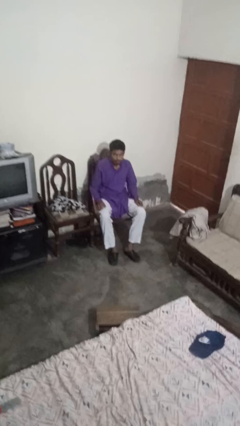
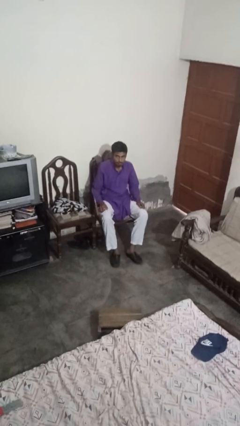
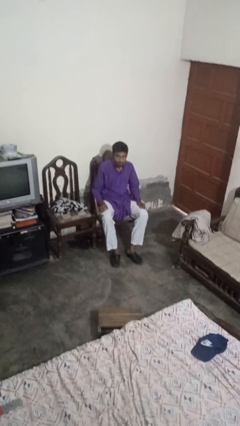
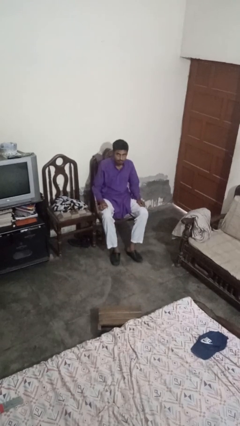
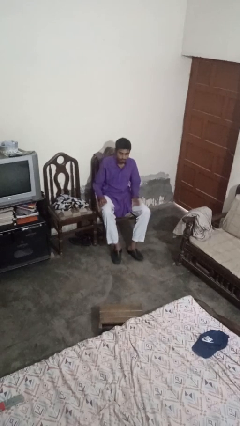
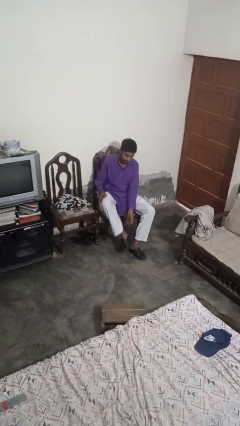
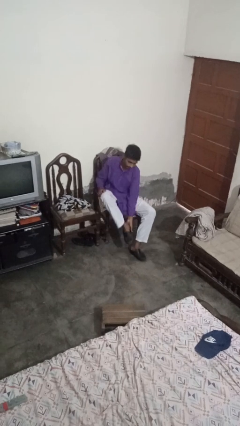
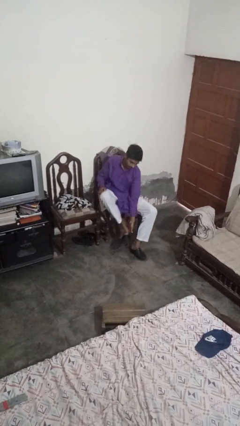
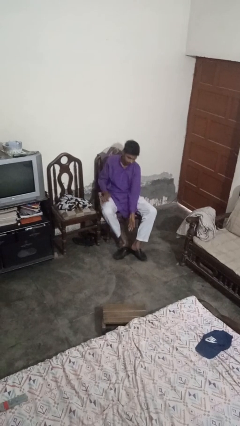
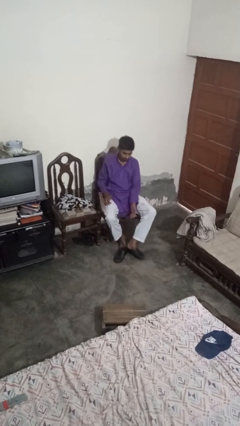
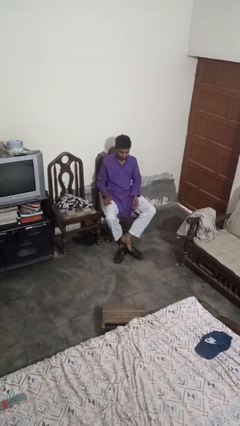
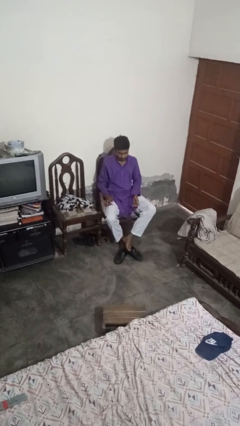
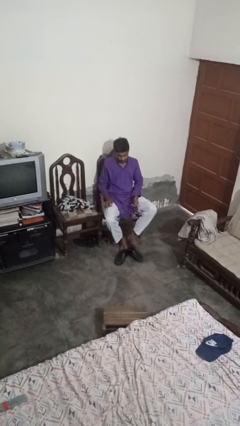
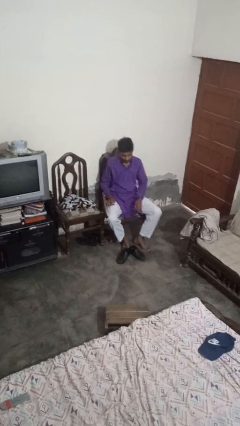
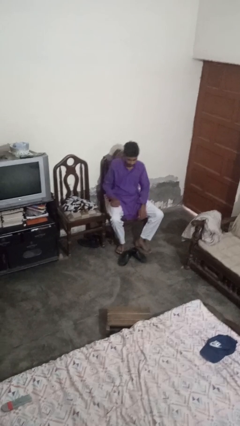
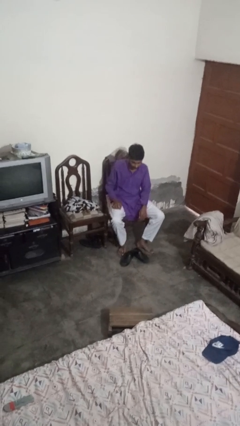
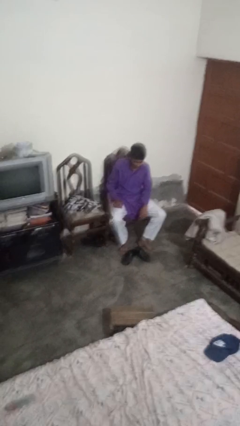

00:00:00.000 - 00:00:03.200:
person takes off shoes

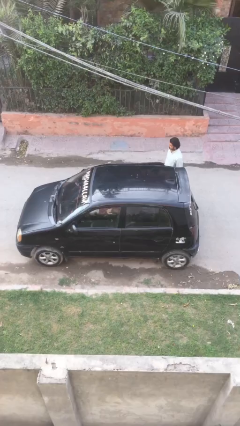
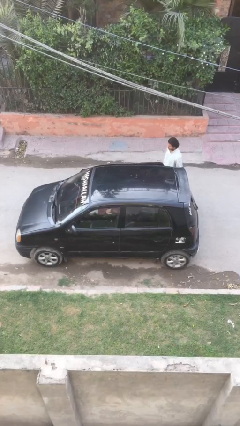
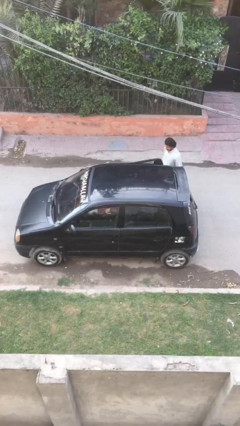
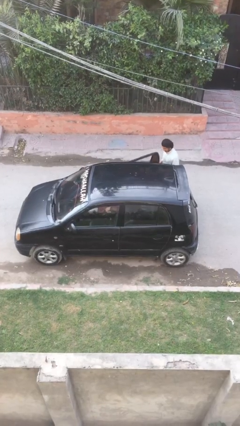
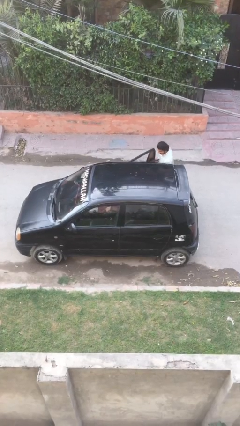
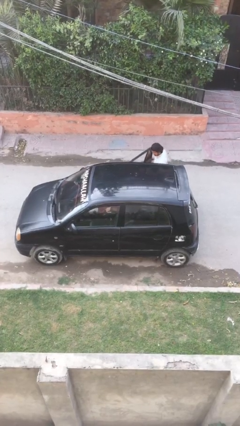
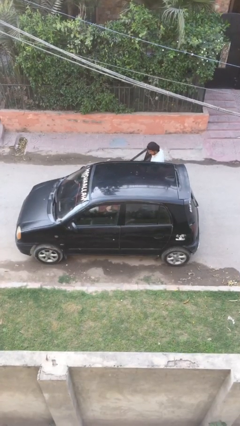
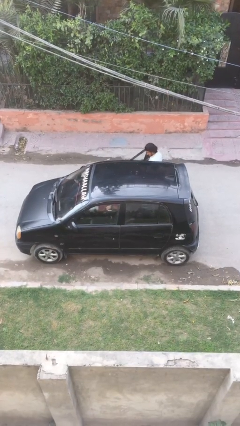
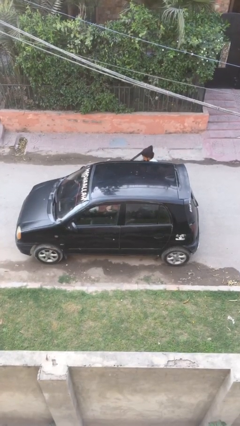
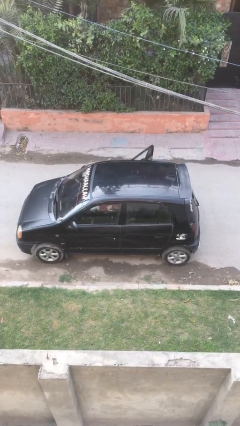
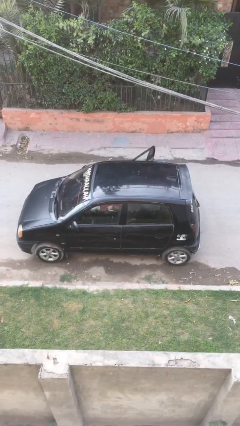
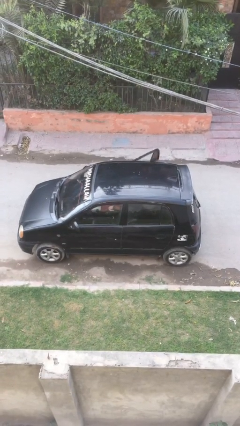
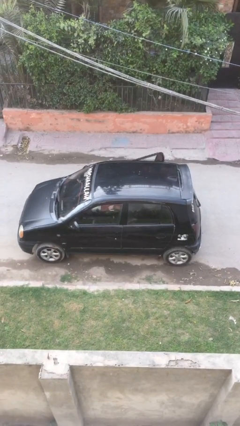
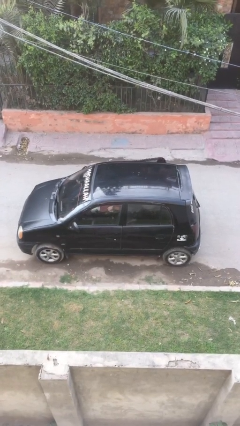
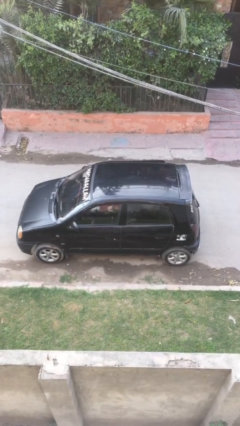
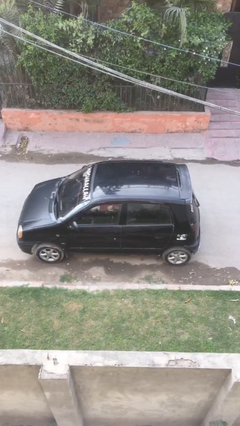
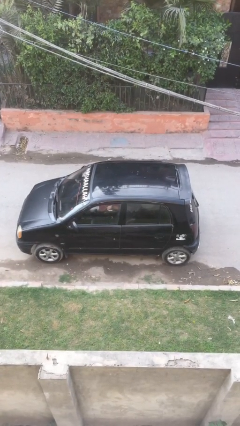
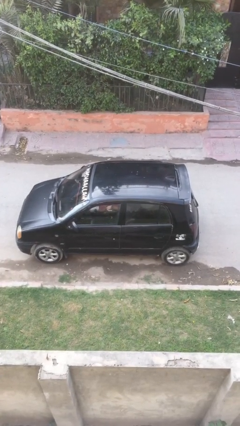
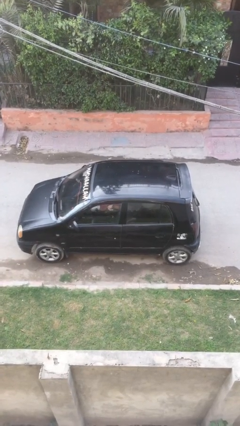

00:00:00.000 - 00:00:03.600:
car picks up person

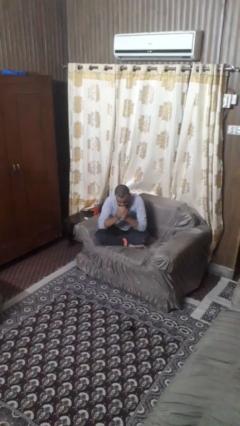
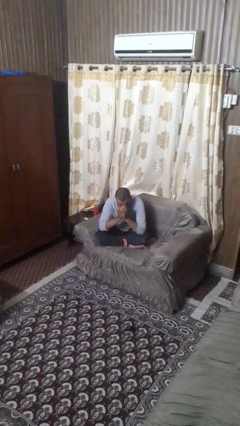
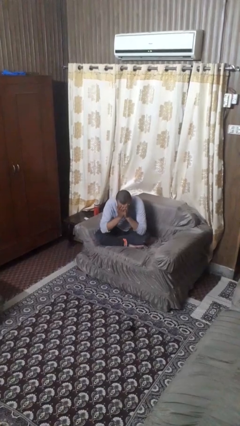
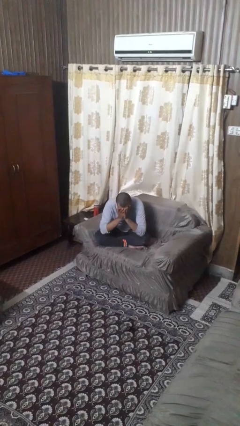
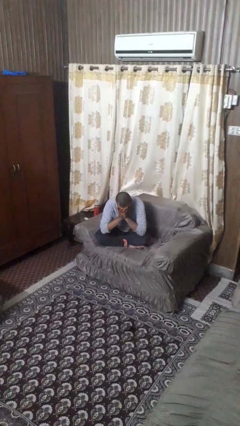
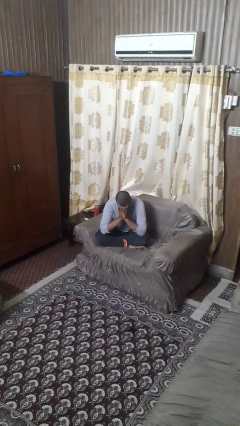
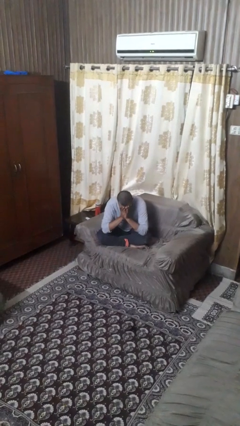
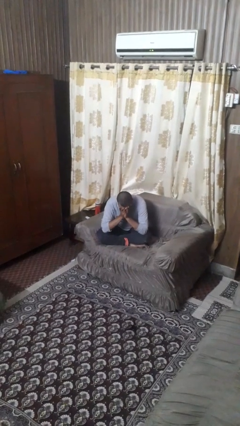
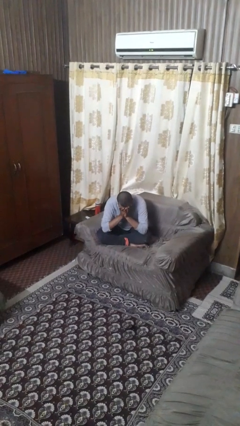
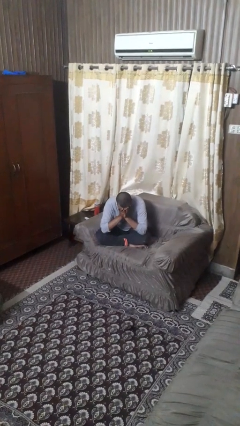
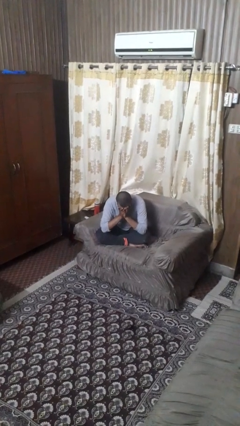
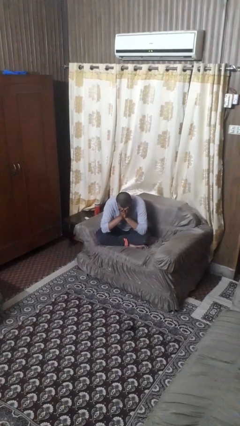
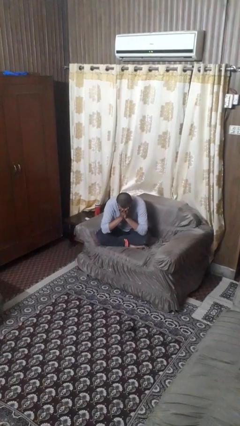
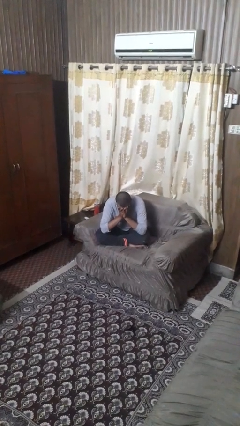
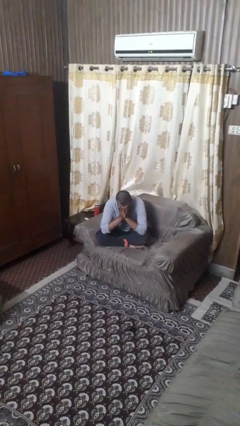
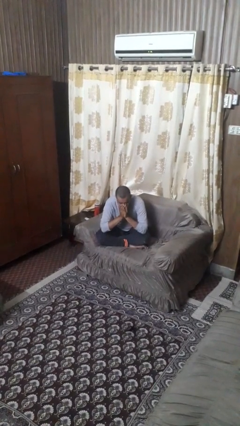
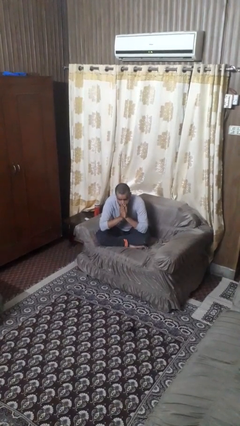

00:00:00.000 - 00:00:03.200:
person covers face with hands

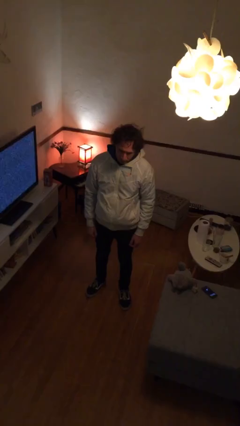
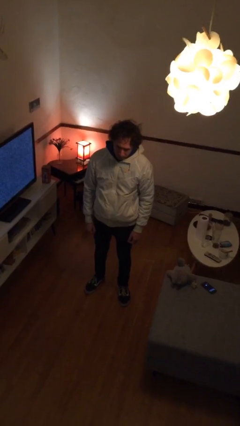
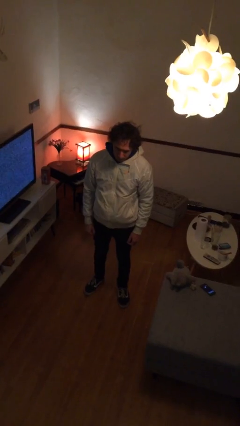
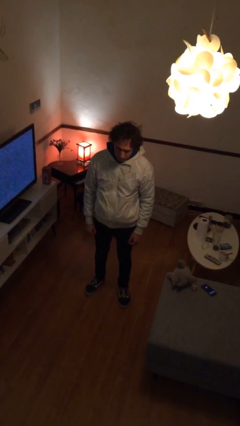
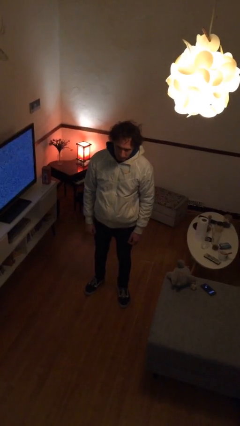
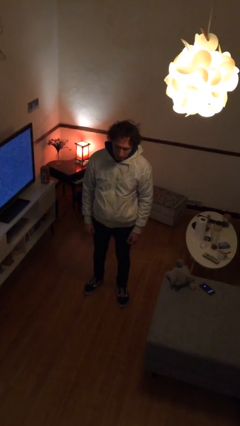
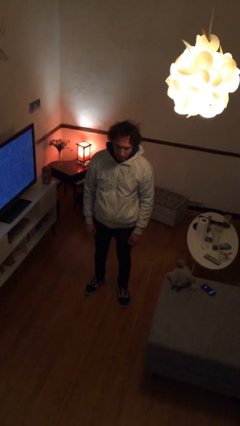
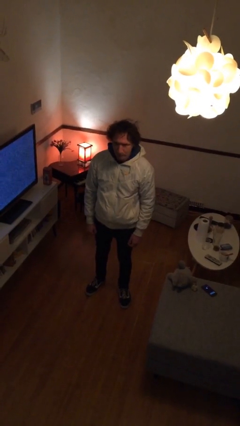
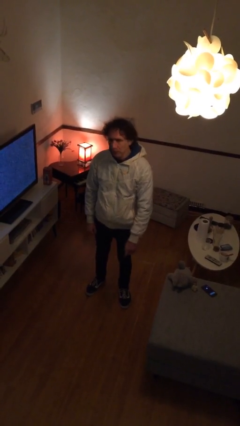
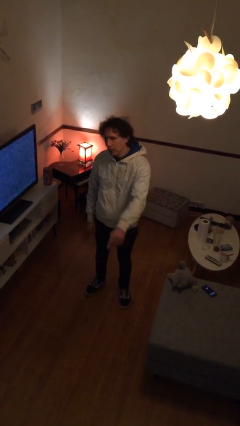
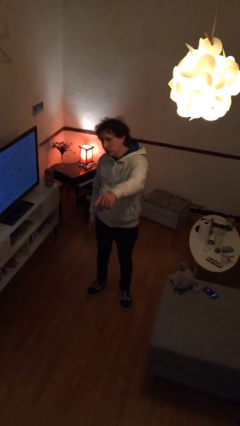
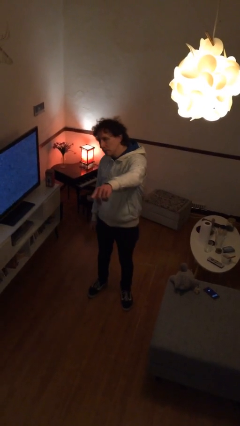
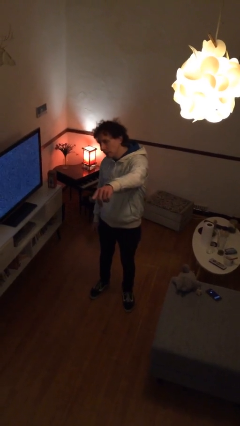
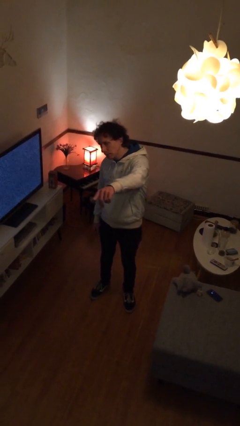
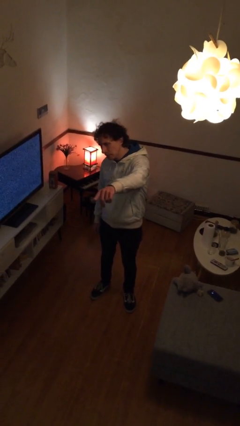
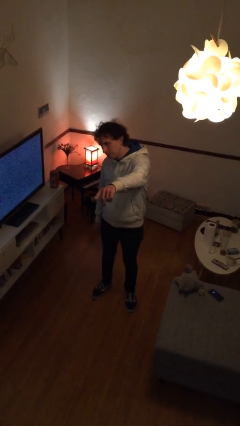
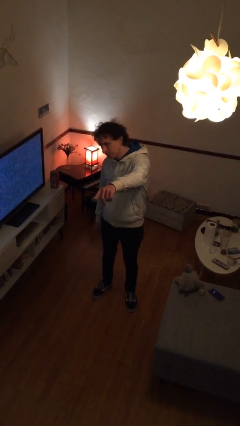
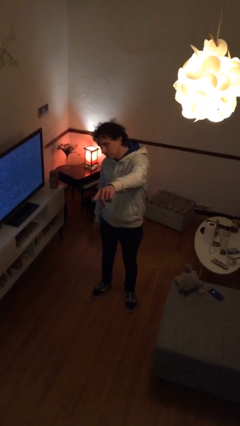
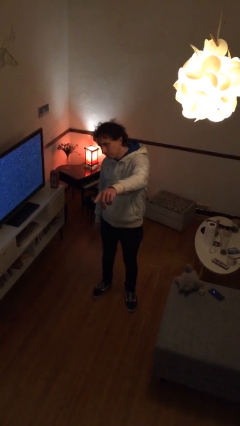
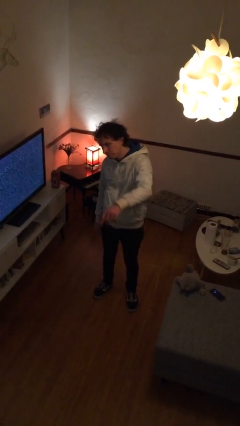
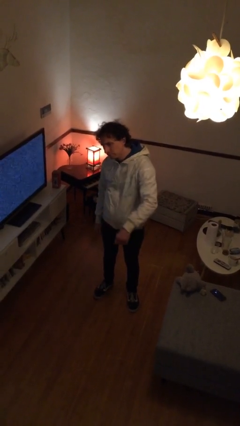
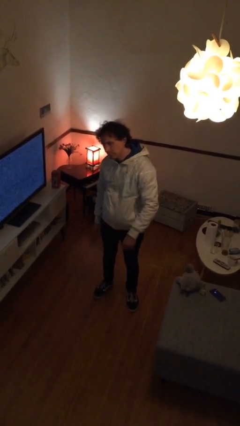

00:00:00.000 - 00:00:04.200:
person points at person

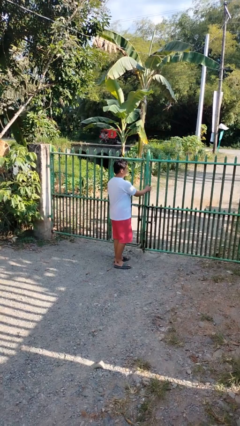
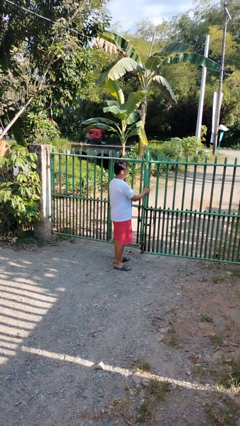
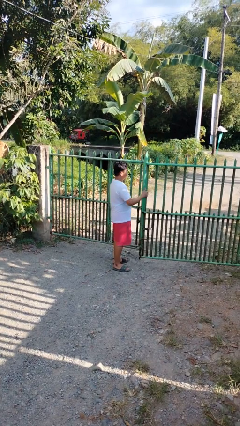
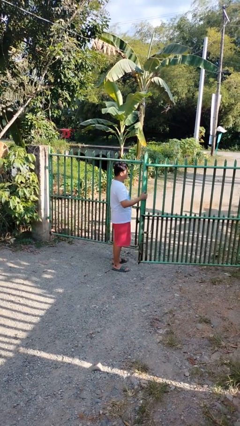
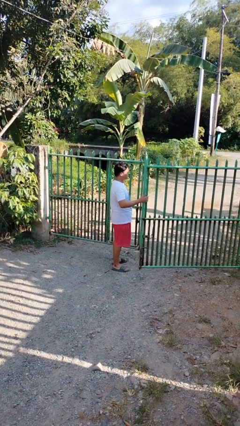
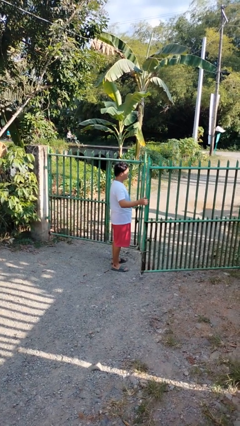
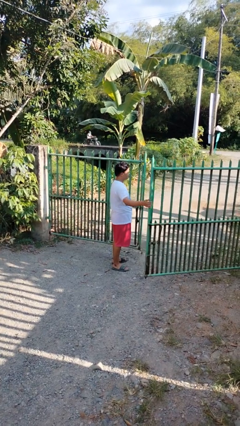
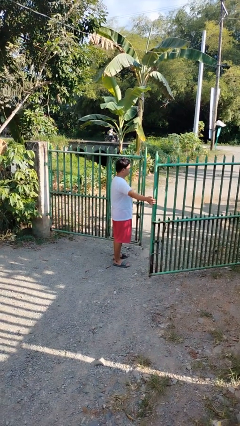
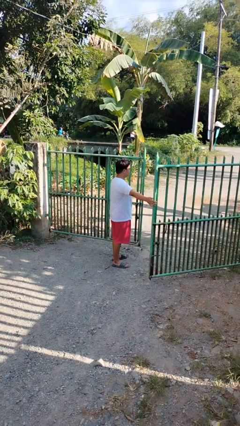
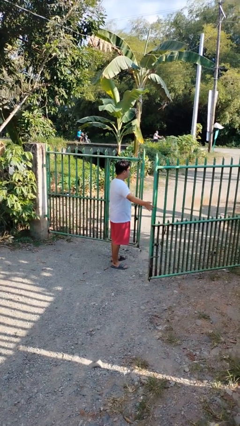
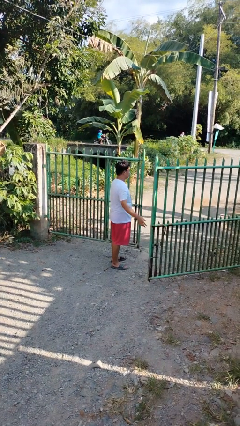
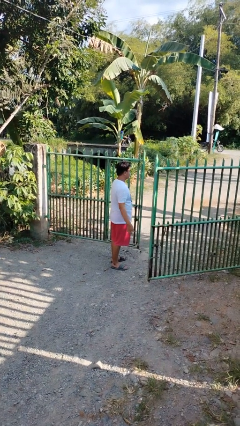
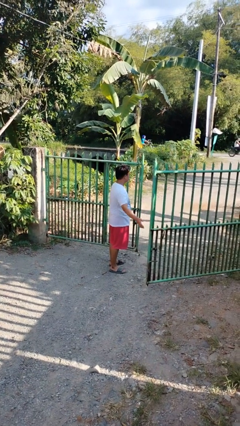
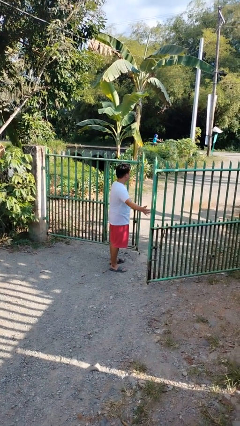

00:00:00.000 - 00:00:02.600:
person opens gate

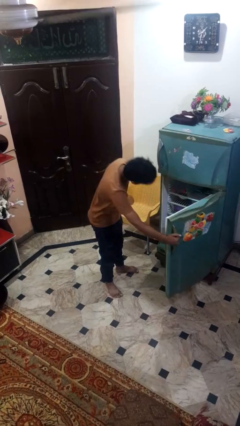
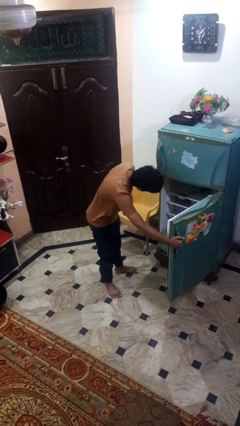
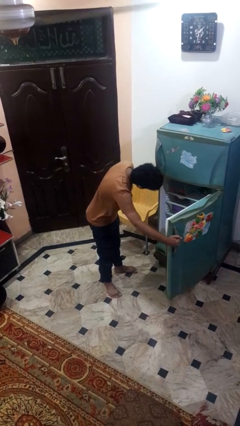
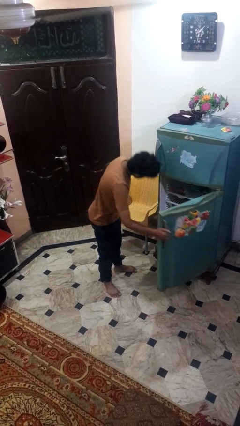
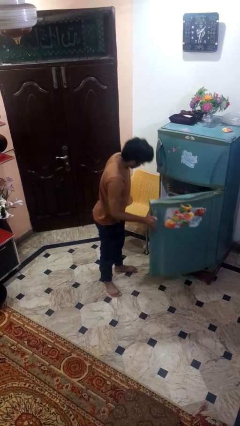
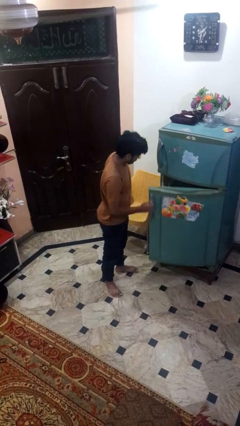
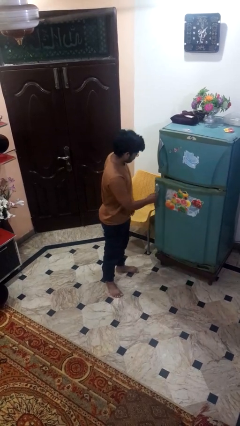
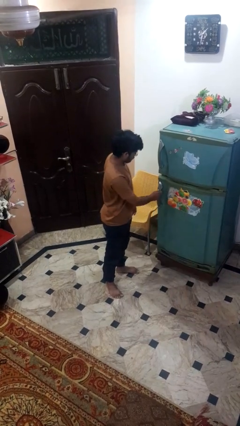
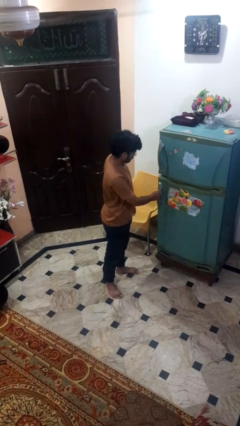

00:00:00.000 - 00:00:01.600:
person closes refrigerator
